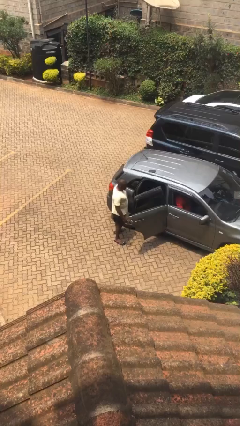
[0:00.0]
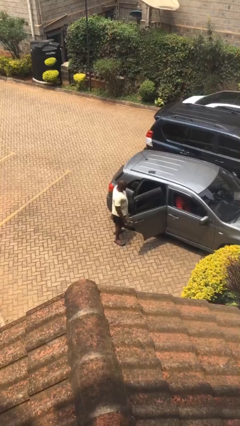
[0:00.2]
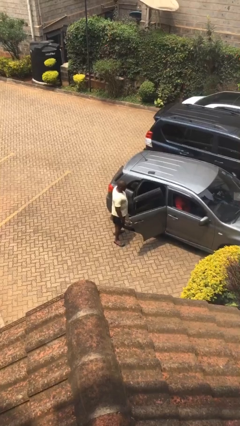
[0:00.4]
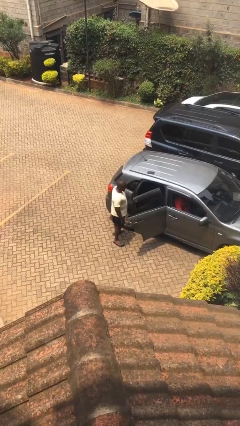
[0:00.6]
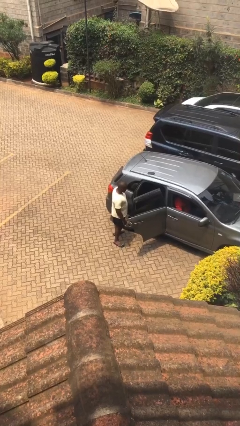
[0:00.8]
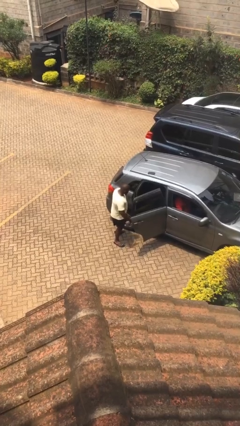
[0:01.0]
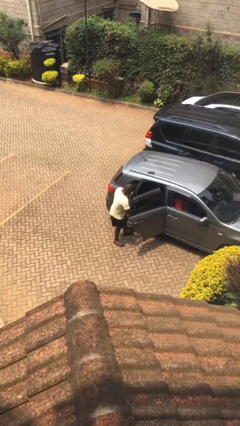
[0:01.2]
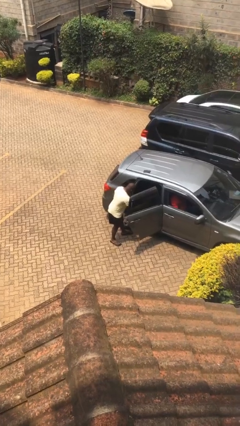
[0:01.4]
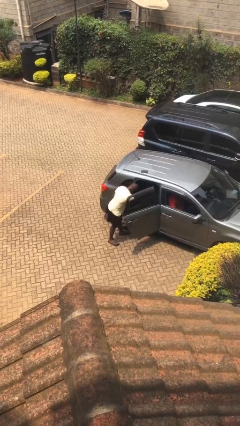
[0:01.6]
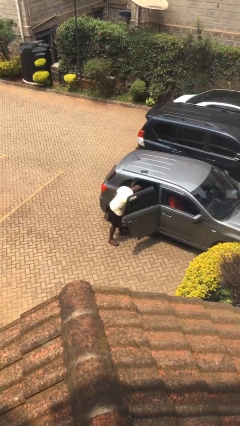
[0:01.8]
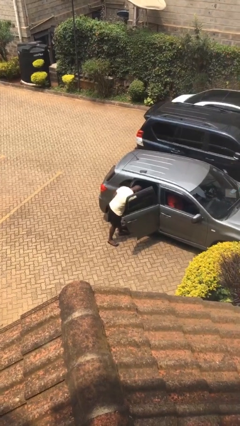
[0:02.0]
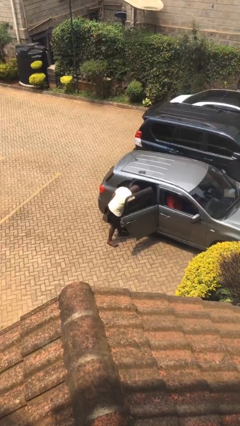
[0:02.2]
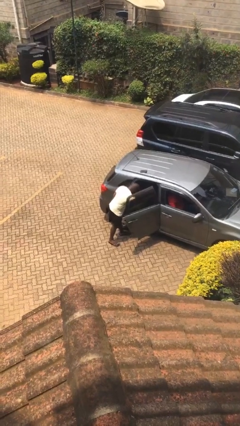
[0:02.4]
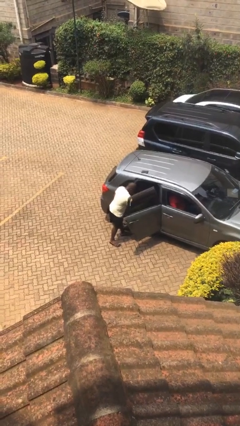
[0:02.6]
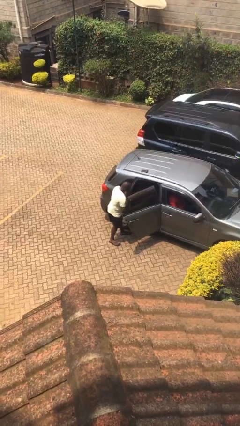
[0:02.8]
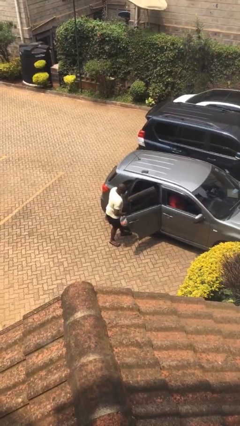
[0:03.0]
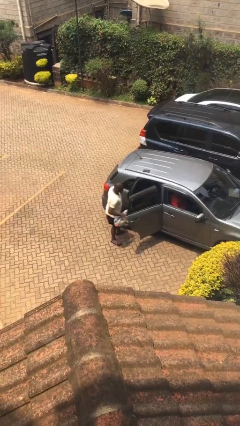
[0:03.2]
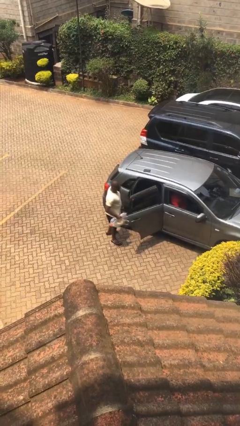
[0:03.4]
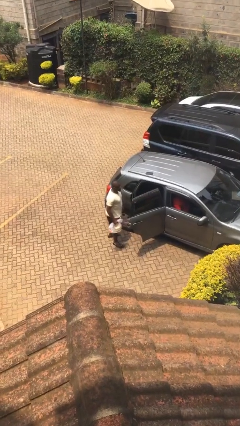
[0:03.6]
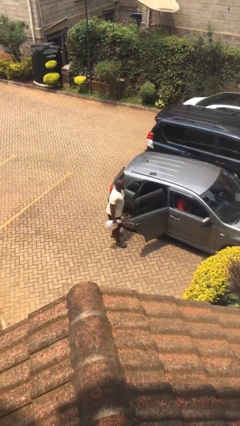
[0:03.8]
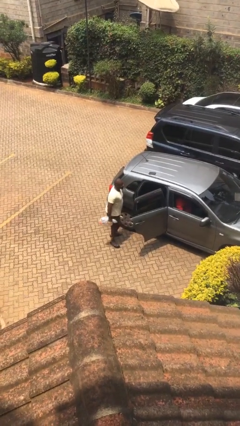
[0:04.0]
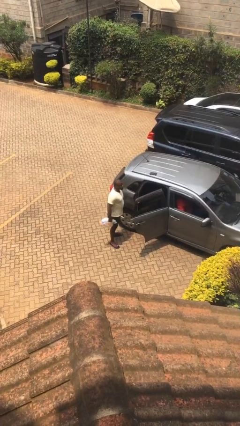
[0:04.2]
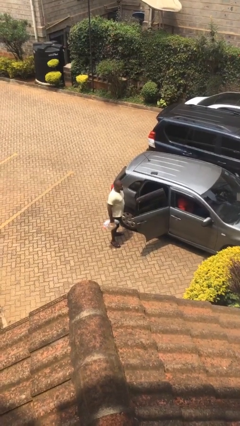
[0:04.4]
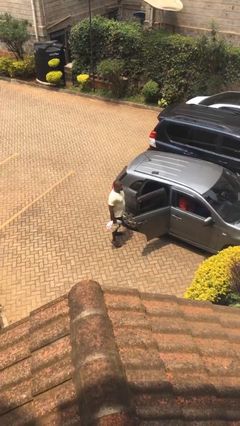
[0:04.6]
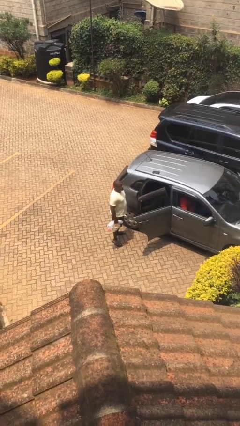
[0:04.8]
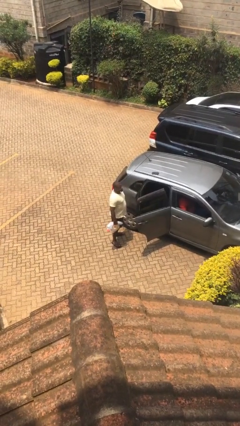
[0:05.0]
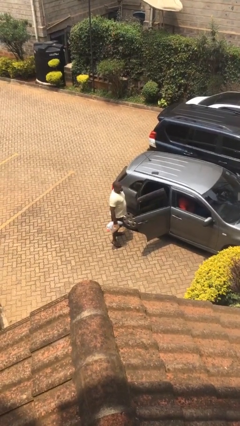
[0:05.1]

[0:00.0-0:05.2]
person unloads car

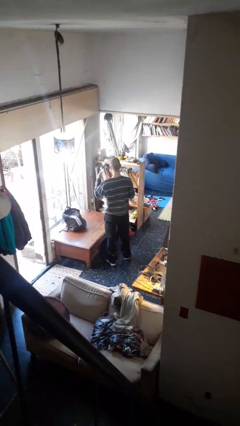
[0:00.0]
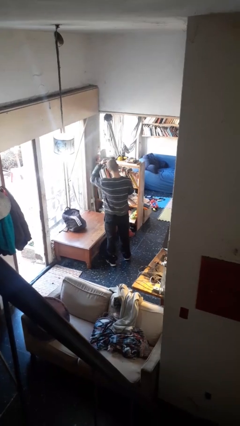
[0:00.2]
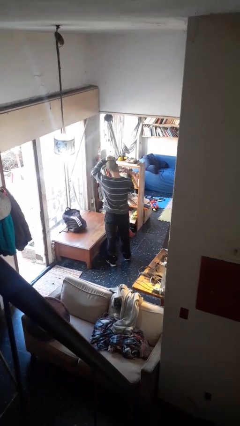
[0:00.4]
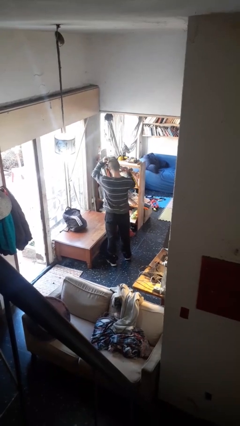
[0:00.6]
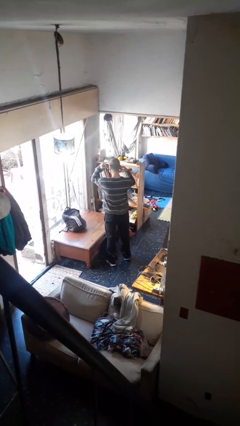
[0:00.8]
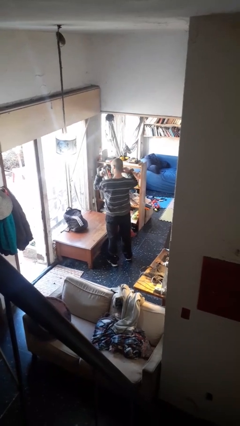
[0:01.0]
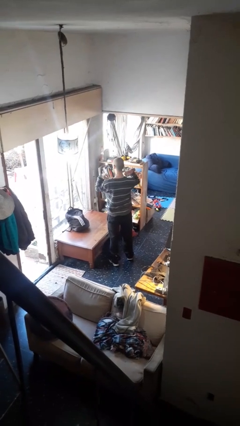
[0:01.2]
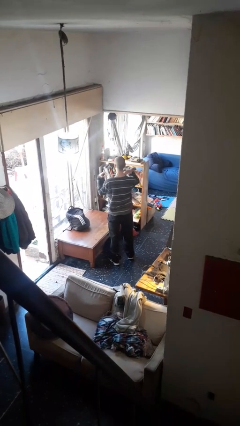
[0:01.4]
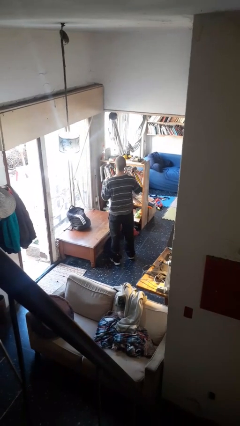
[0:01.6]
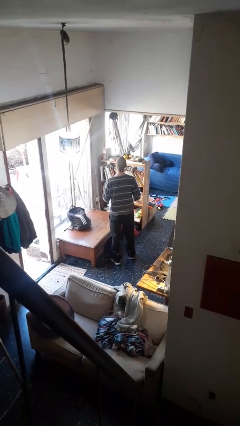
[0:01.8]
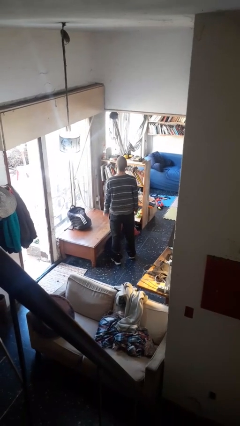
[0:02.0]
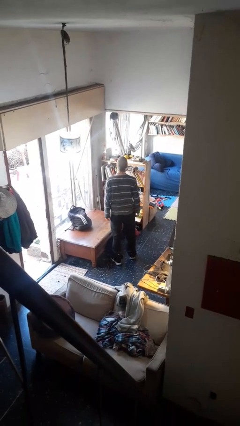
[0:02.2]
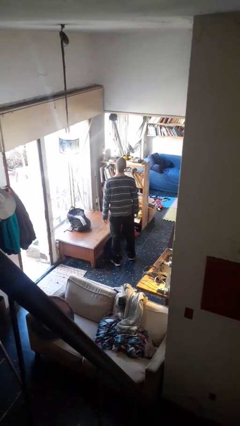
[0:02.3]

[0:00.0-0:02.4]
person puts on necklace

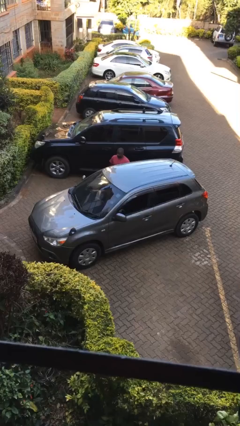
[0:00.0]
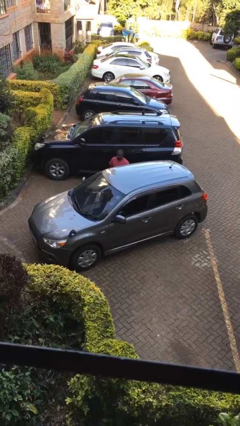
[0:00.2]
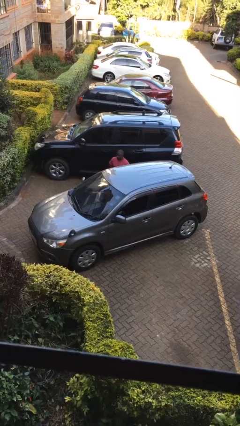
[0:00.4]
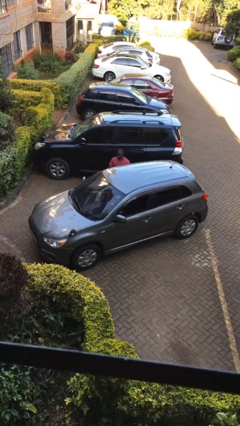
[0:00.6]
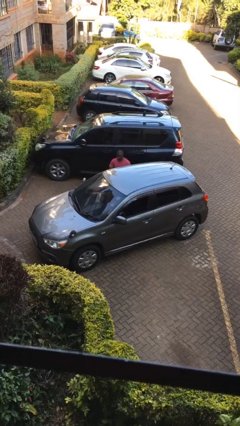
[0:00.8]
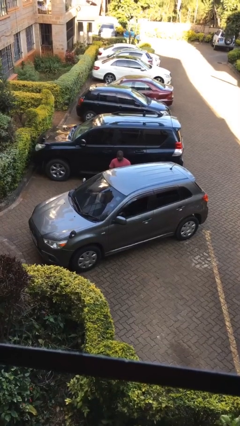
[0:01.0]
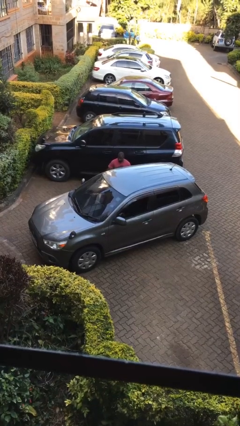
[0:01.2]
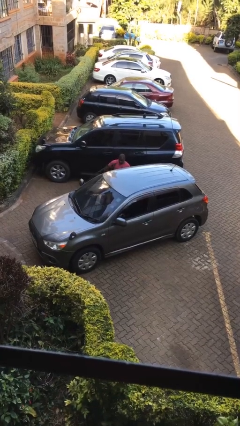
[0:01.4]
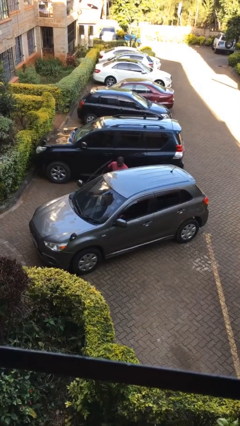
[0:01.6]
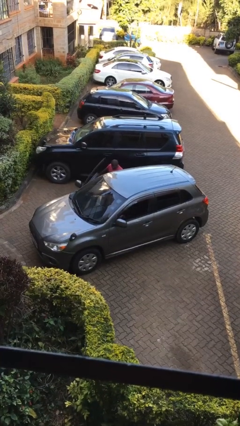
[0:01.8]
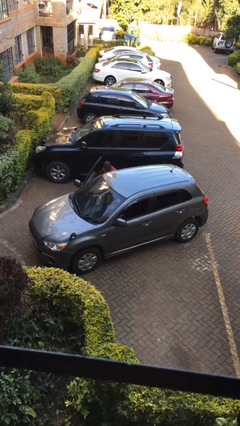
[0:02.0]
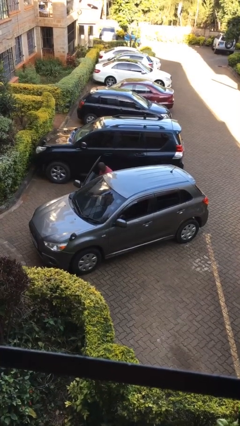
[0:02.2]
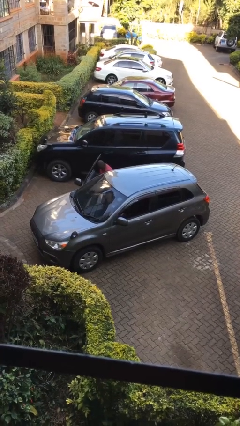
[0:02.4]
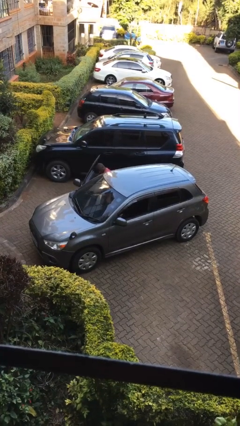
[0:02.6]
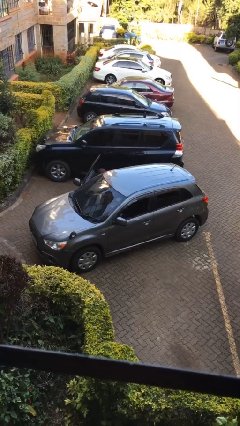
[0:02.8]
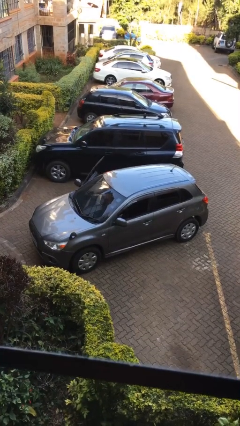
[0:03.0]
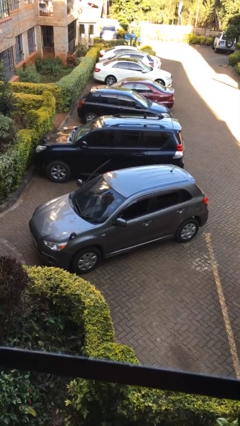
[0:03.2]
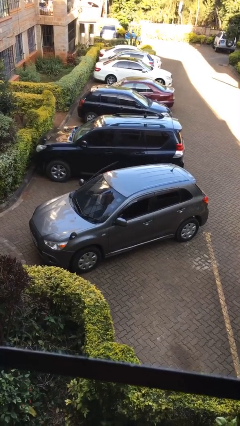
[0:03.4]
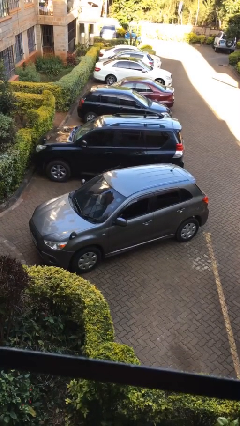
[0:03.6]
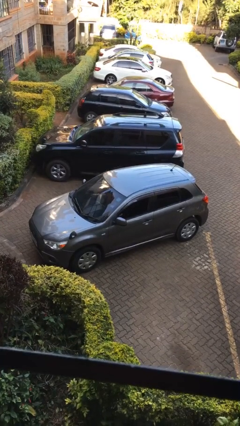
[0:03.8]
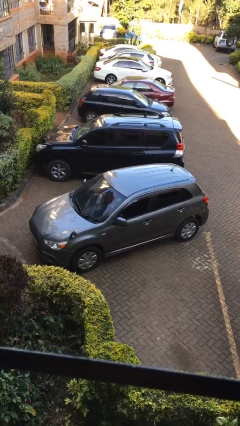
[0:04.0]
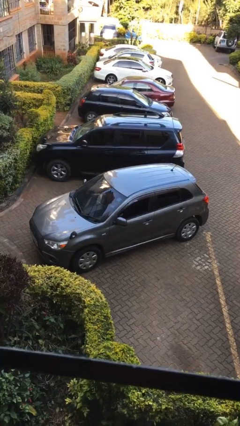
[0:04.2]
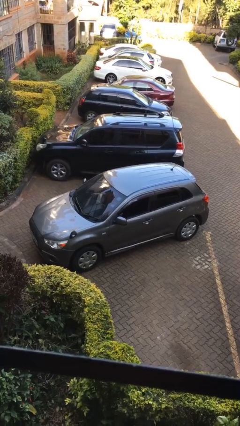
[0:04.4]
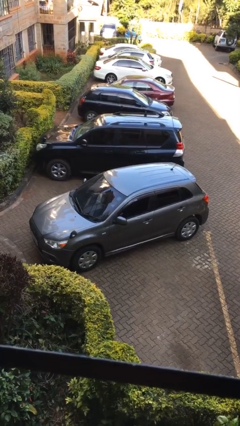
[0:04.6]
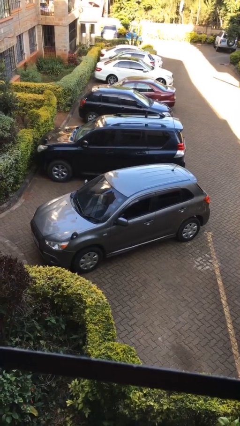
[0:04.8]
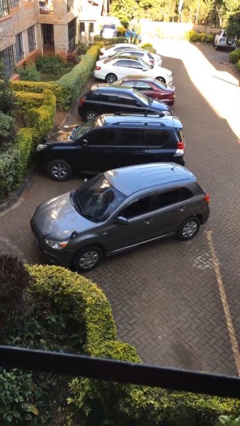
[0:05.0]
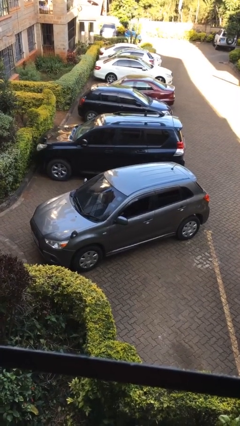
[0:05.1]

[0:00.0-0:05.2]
car picks up person

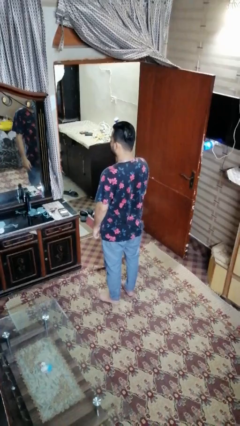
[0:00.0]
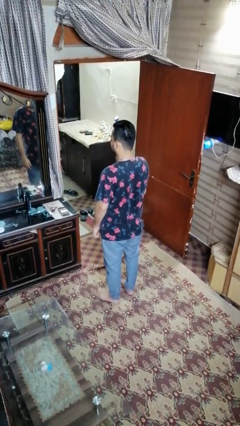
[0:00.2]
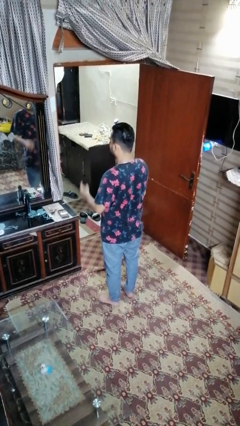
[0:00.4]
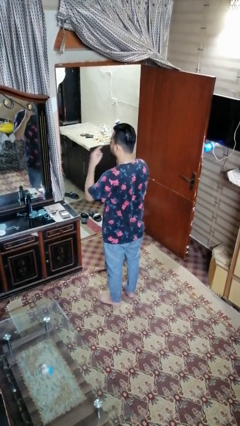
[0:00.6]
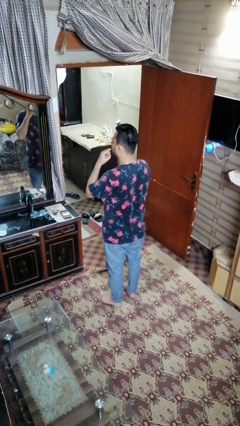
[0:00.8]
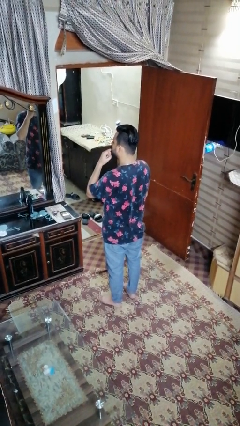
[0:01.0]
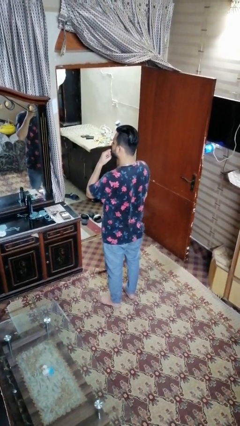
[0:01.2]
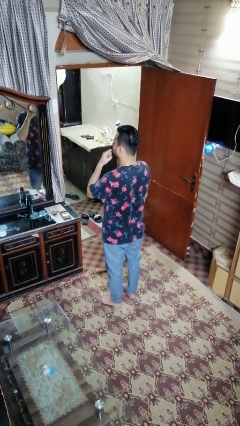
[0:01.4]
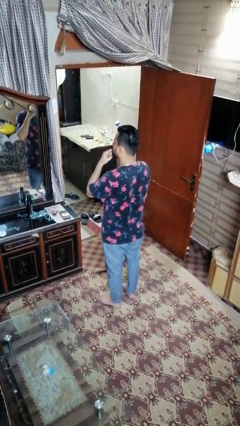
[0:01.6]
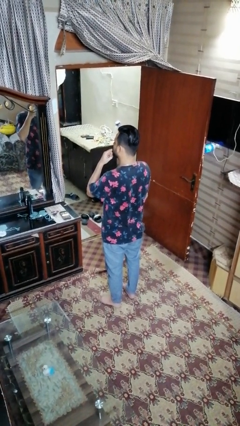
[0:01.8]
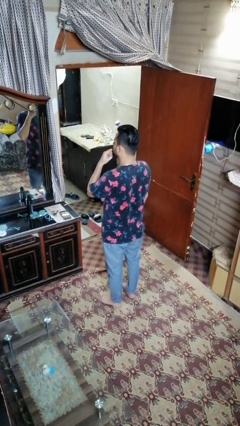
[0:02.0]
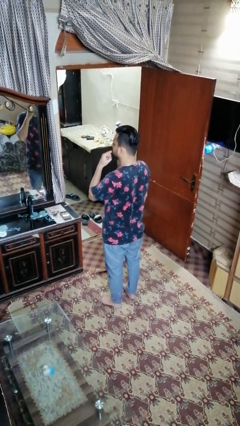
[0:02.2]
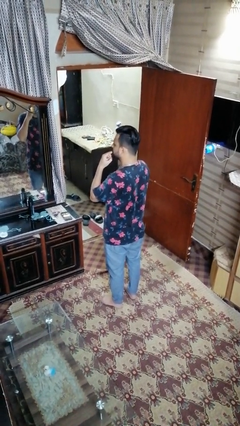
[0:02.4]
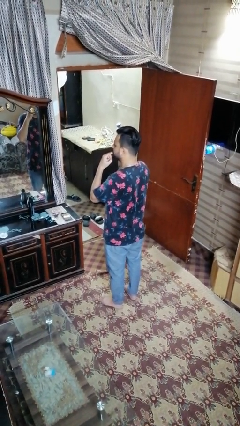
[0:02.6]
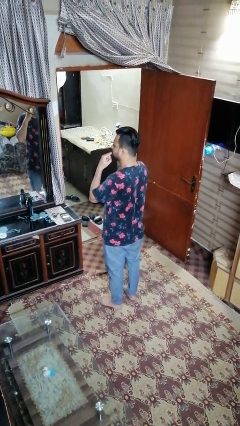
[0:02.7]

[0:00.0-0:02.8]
person licks fingers

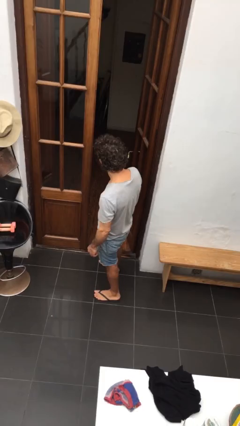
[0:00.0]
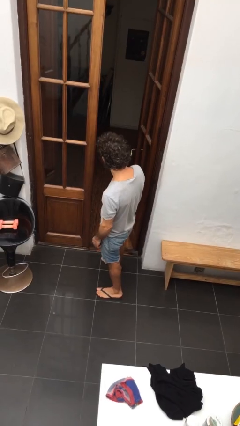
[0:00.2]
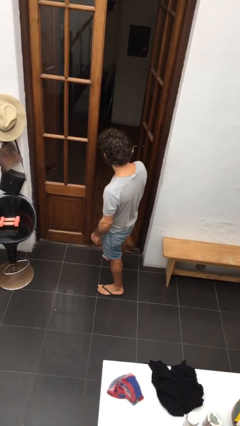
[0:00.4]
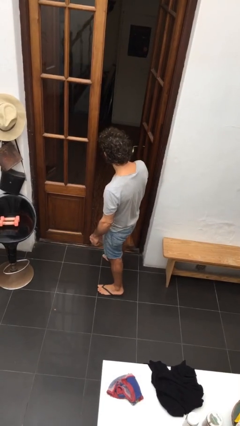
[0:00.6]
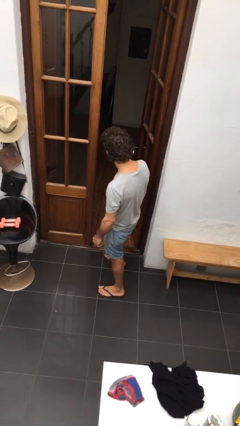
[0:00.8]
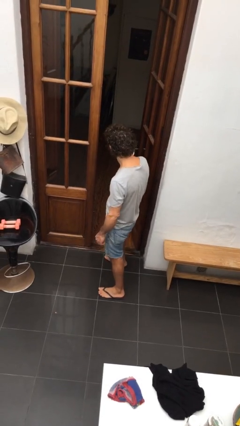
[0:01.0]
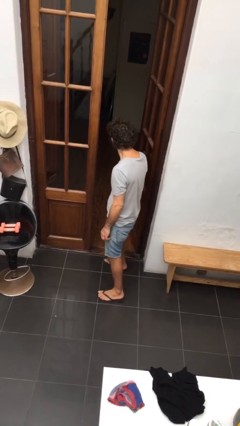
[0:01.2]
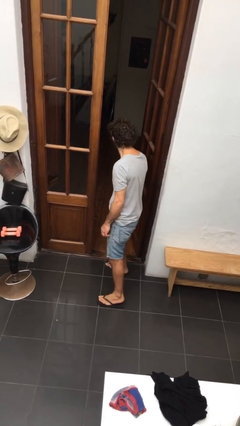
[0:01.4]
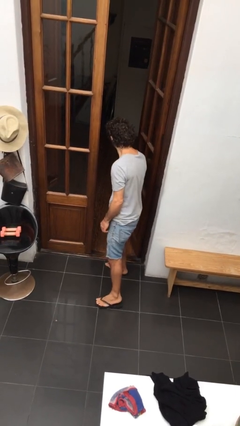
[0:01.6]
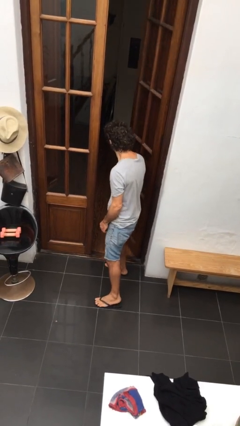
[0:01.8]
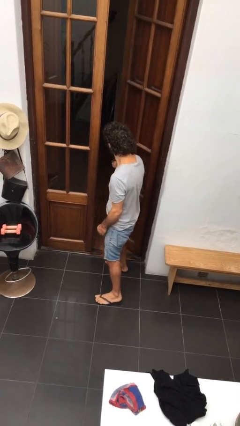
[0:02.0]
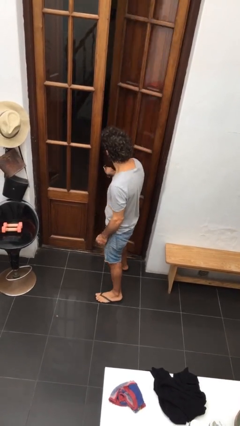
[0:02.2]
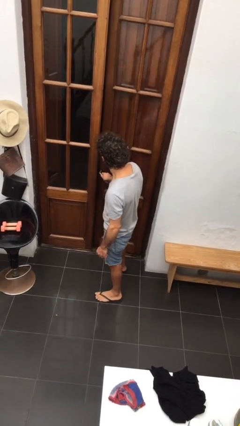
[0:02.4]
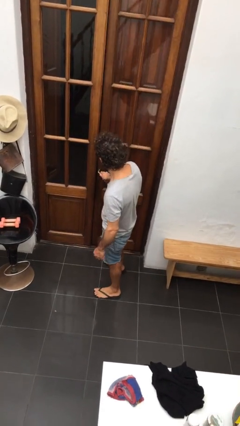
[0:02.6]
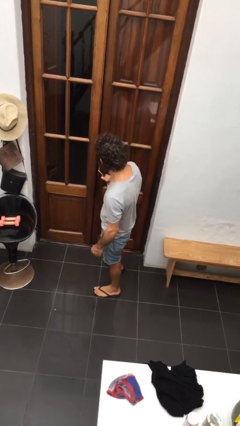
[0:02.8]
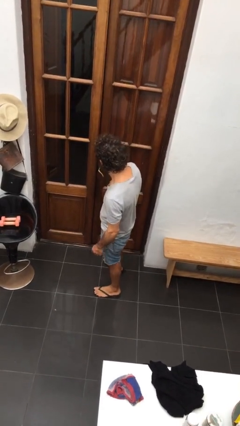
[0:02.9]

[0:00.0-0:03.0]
person closes facility door
